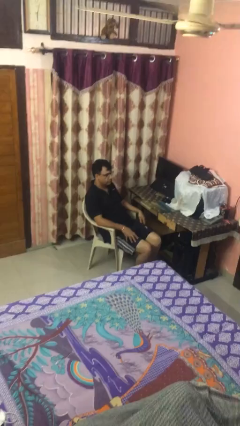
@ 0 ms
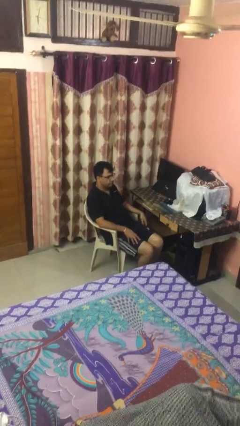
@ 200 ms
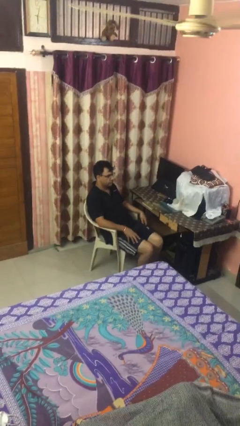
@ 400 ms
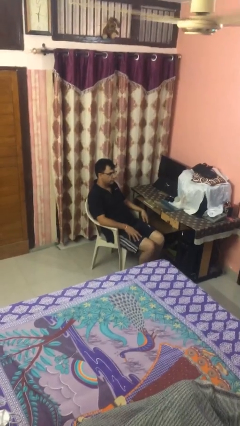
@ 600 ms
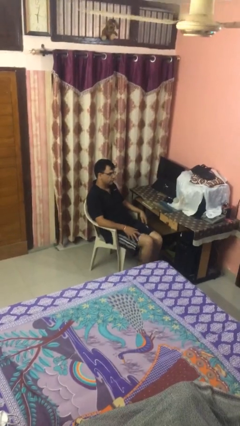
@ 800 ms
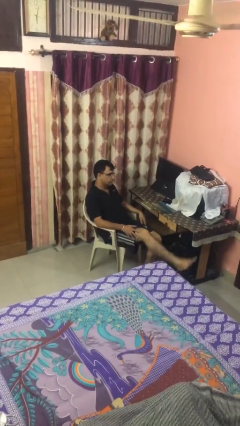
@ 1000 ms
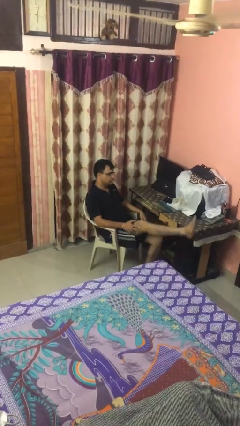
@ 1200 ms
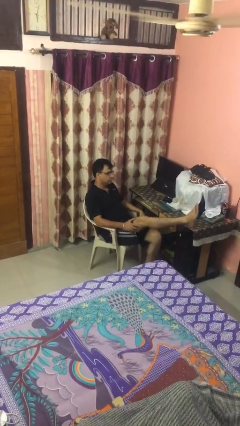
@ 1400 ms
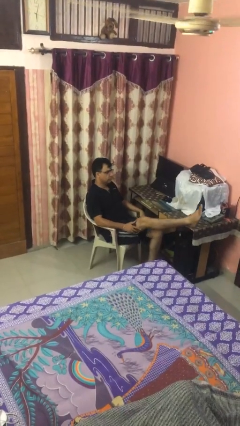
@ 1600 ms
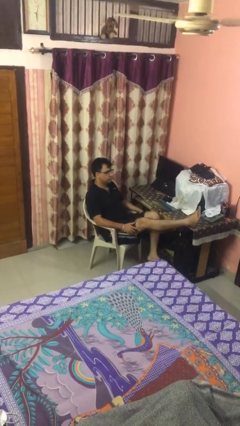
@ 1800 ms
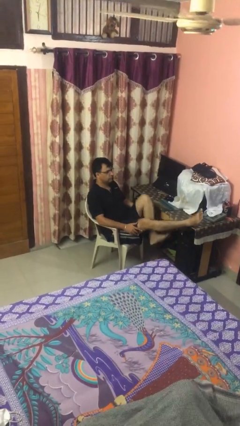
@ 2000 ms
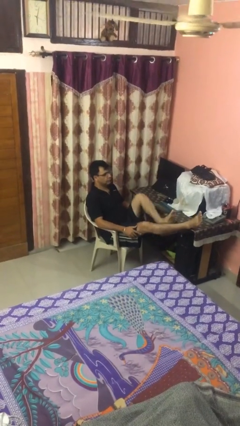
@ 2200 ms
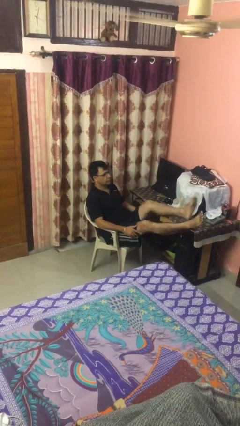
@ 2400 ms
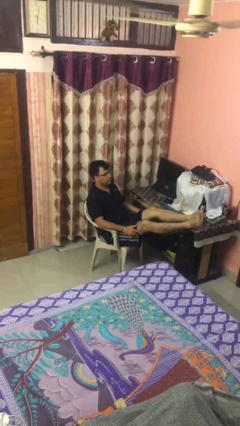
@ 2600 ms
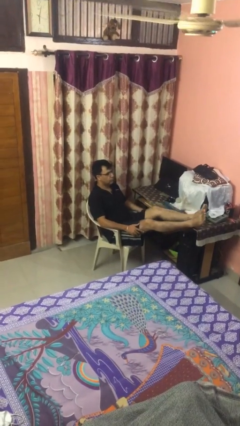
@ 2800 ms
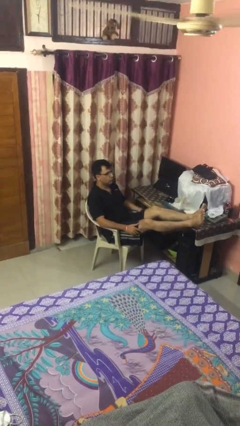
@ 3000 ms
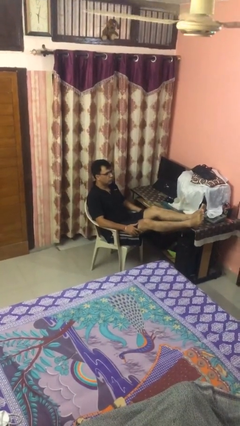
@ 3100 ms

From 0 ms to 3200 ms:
person puts feet up

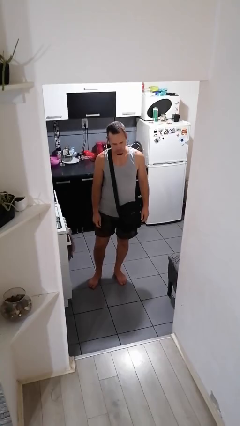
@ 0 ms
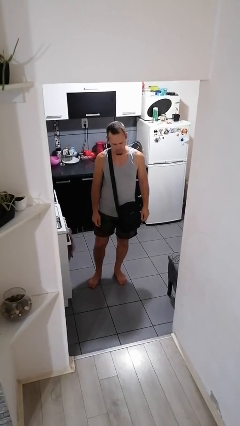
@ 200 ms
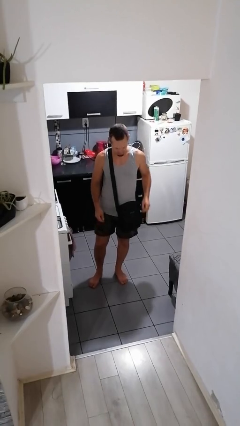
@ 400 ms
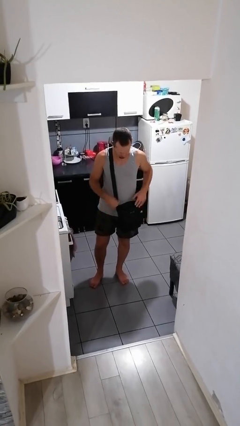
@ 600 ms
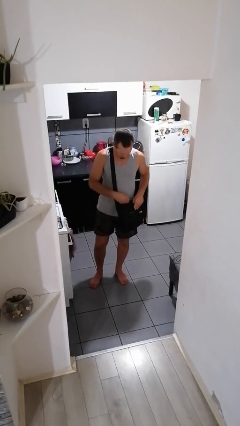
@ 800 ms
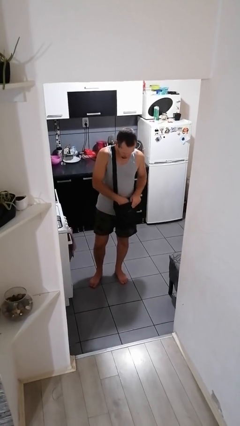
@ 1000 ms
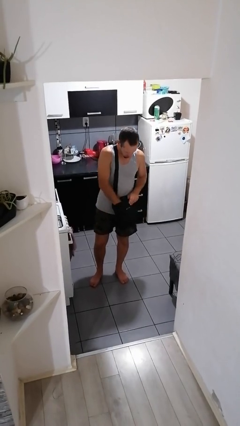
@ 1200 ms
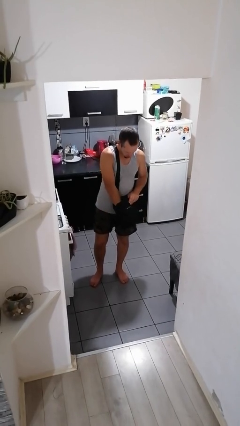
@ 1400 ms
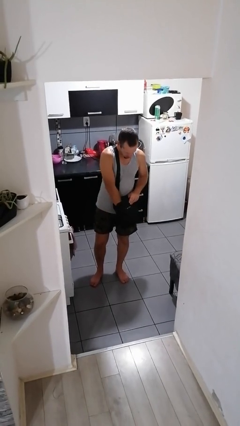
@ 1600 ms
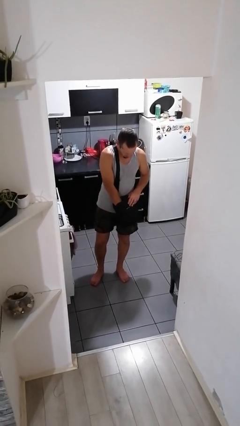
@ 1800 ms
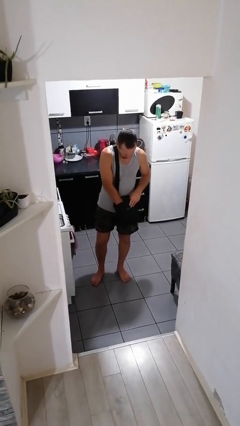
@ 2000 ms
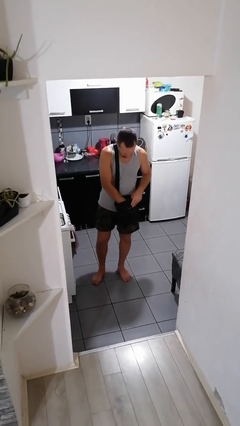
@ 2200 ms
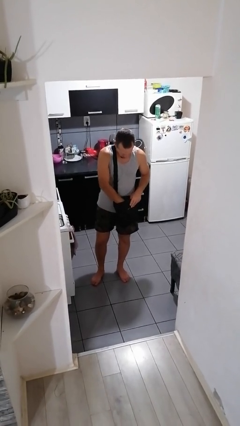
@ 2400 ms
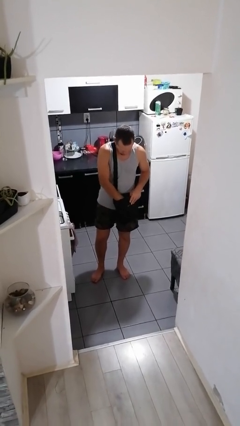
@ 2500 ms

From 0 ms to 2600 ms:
person searches in purse

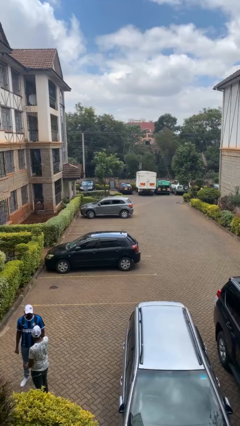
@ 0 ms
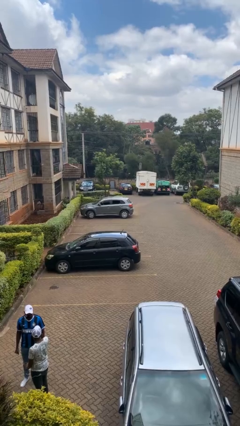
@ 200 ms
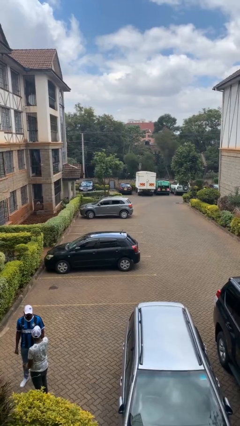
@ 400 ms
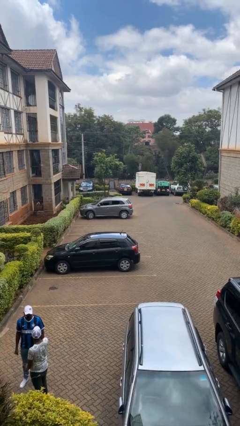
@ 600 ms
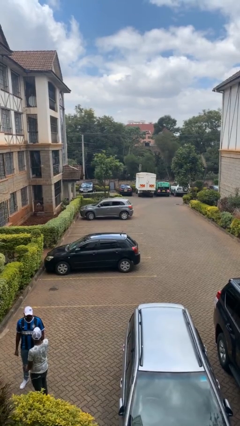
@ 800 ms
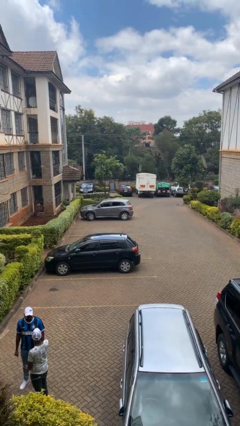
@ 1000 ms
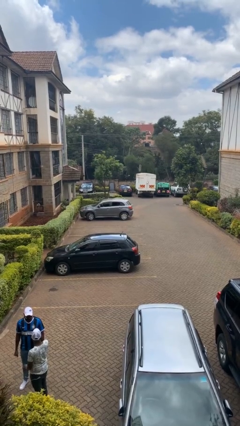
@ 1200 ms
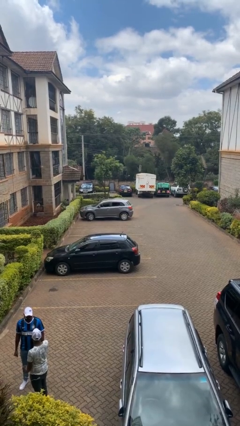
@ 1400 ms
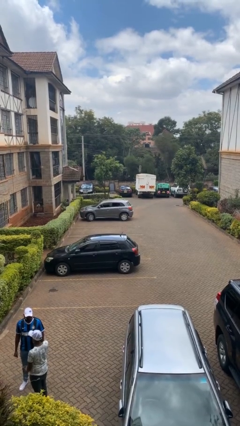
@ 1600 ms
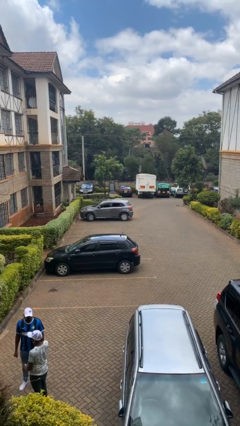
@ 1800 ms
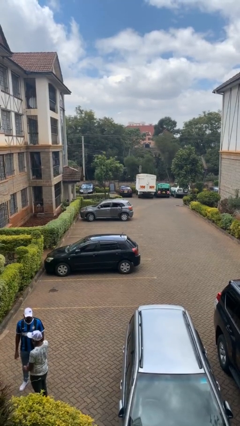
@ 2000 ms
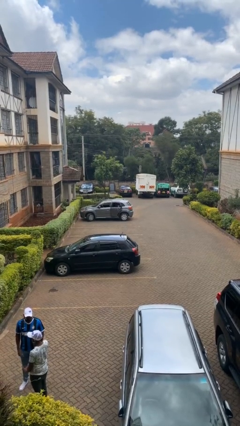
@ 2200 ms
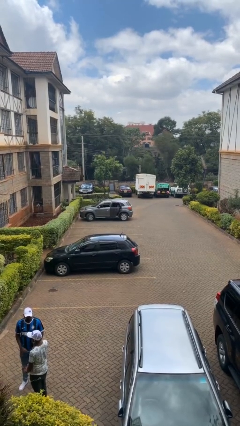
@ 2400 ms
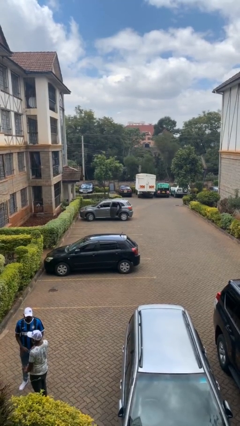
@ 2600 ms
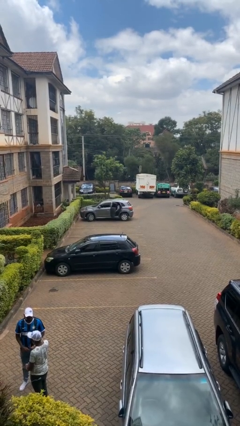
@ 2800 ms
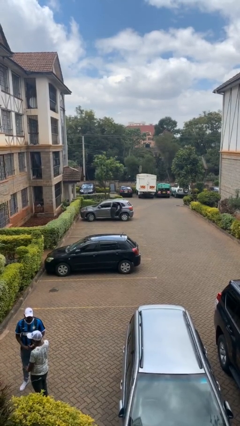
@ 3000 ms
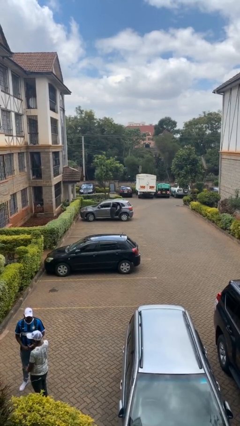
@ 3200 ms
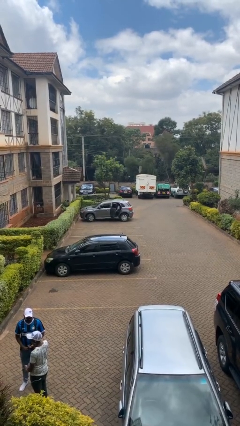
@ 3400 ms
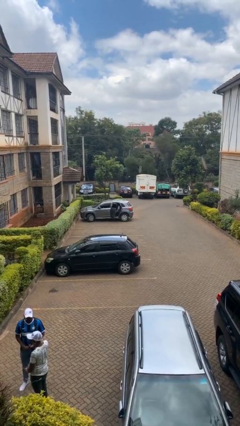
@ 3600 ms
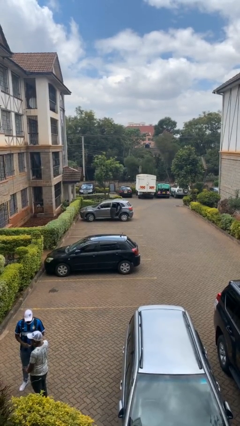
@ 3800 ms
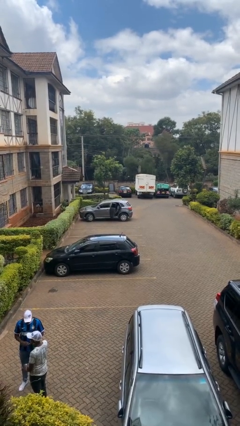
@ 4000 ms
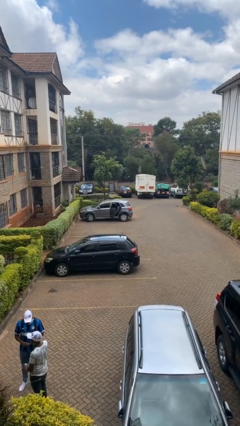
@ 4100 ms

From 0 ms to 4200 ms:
person opens car door

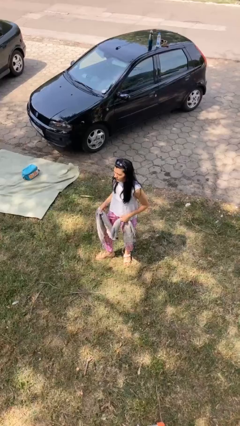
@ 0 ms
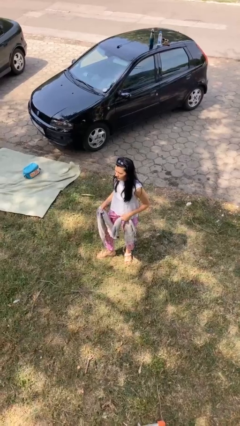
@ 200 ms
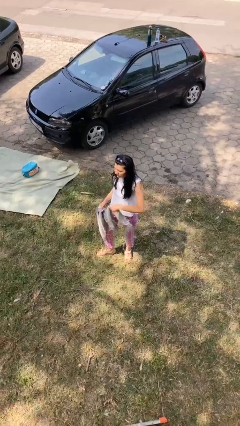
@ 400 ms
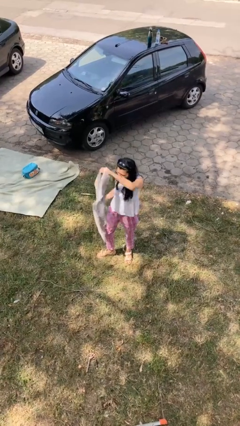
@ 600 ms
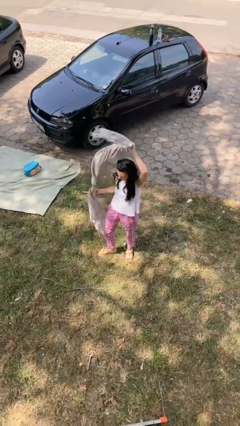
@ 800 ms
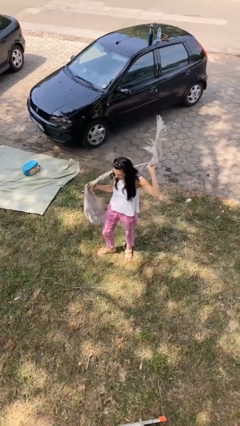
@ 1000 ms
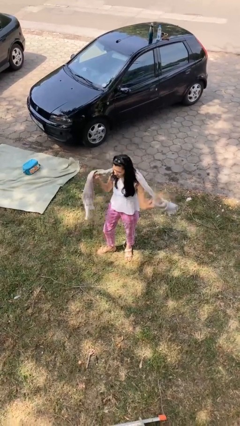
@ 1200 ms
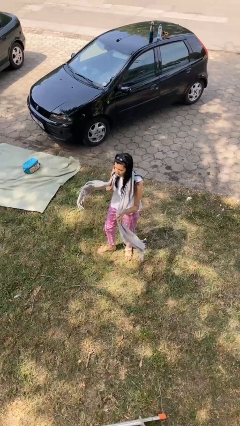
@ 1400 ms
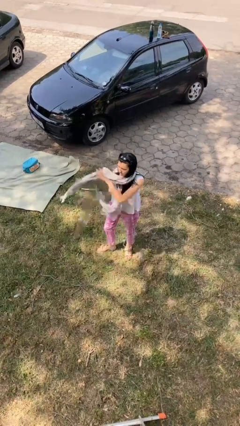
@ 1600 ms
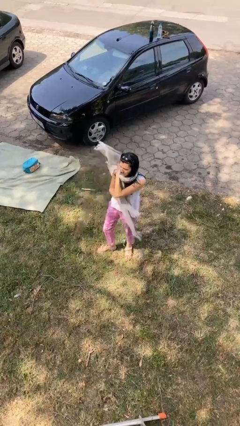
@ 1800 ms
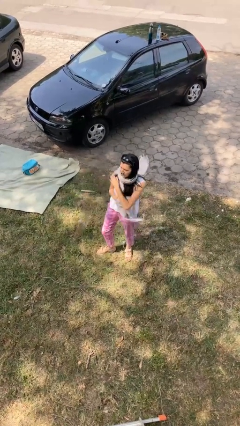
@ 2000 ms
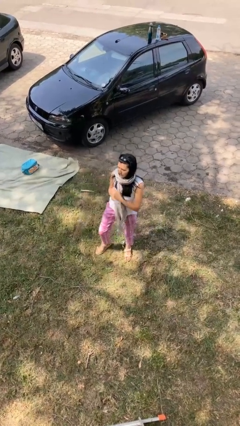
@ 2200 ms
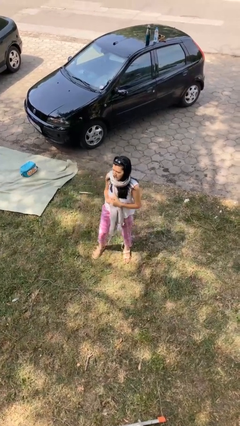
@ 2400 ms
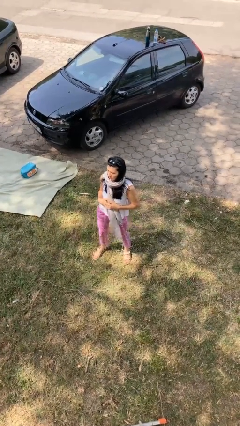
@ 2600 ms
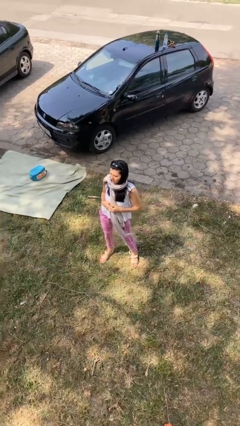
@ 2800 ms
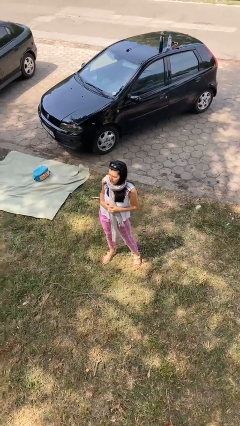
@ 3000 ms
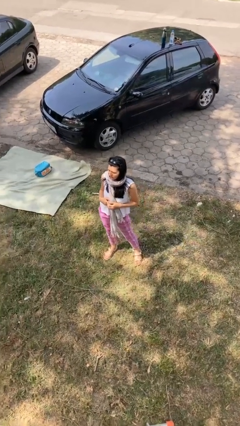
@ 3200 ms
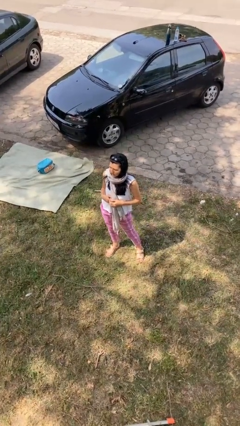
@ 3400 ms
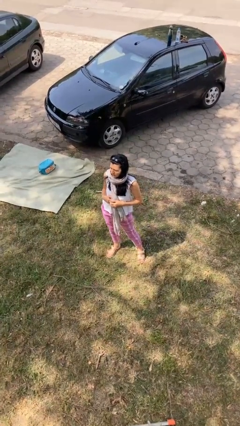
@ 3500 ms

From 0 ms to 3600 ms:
person puts on scarf

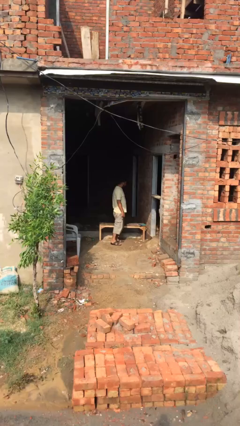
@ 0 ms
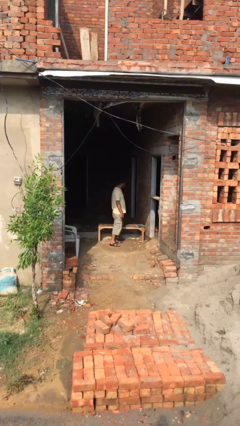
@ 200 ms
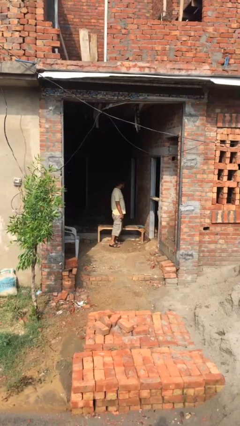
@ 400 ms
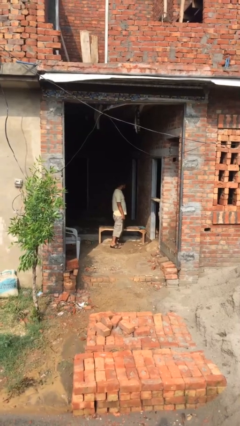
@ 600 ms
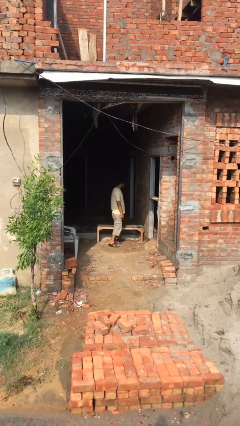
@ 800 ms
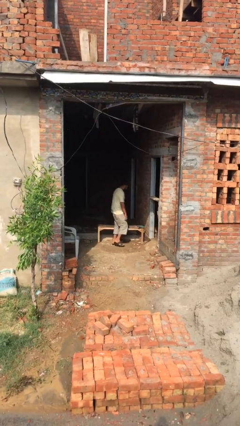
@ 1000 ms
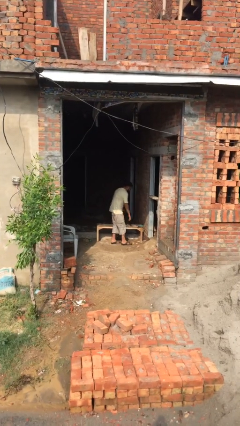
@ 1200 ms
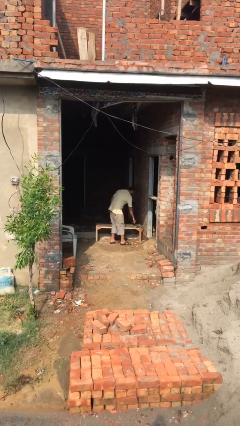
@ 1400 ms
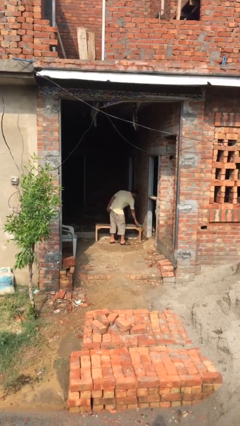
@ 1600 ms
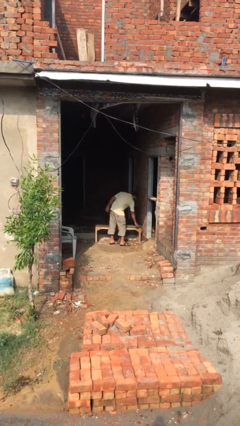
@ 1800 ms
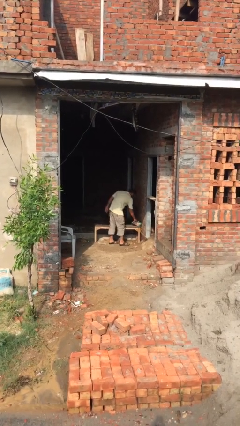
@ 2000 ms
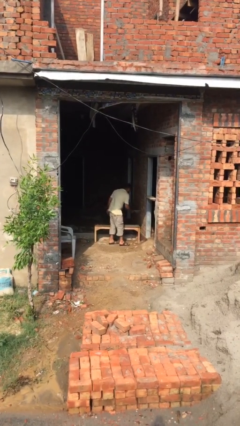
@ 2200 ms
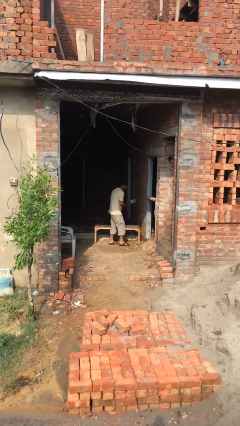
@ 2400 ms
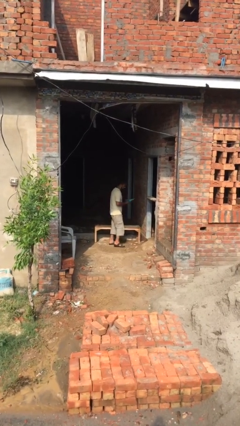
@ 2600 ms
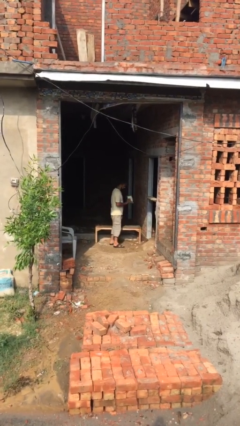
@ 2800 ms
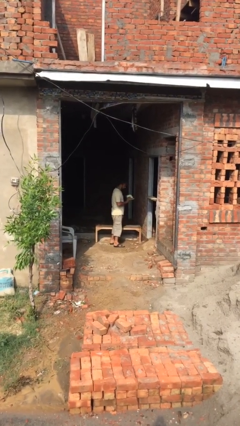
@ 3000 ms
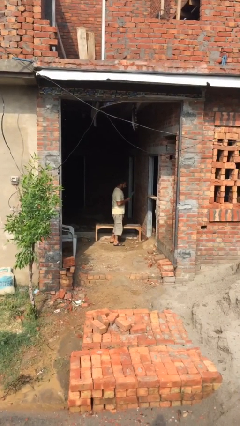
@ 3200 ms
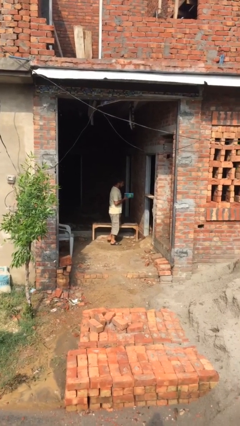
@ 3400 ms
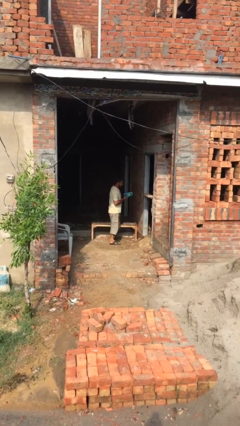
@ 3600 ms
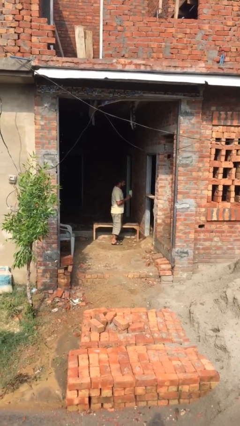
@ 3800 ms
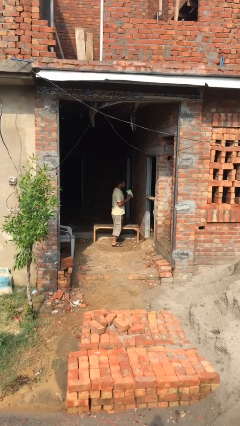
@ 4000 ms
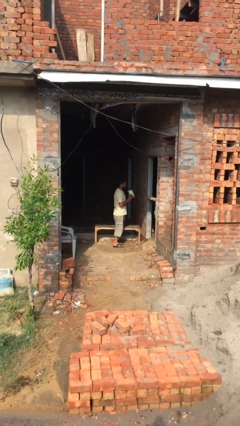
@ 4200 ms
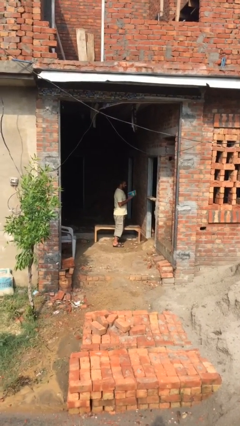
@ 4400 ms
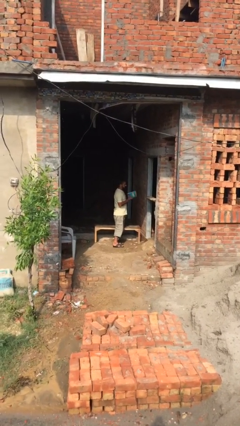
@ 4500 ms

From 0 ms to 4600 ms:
person picks up object from table
